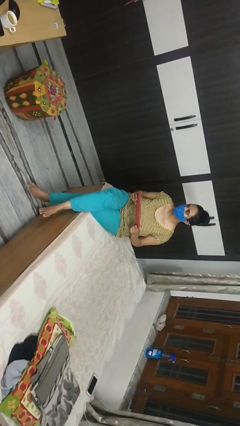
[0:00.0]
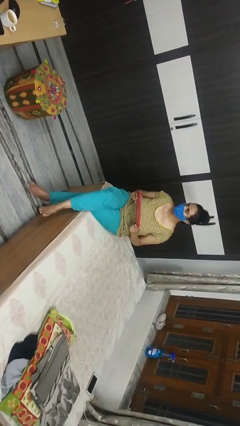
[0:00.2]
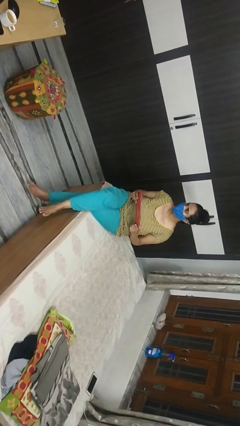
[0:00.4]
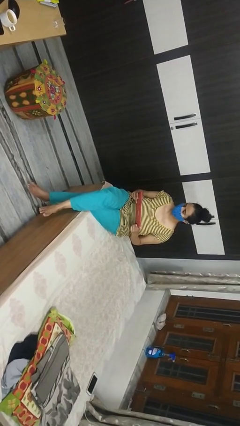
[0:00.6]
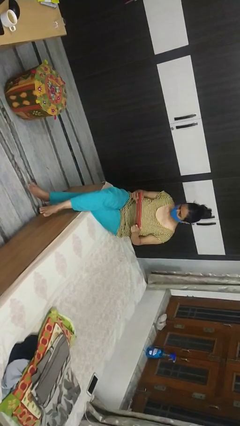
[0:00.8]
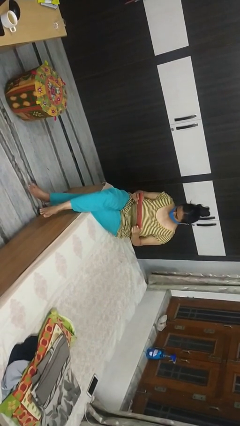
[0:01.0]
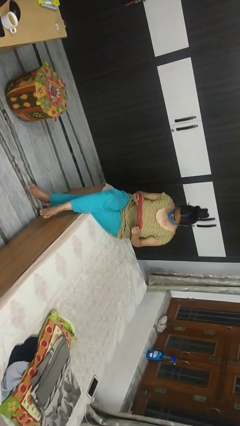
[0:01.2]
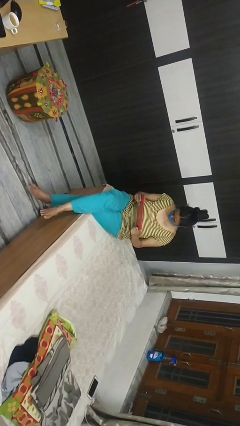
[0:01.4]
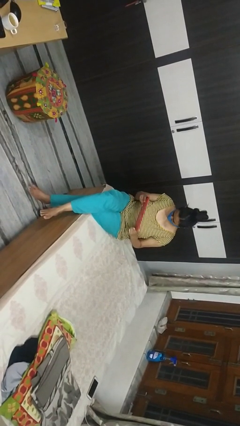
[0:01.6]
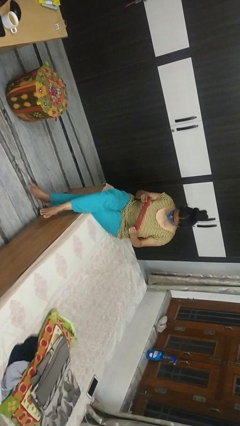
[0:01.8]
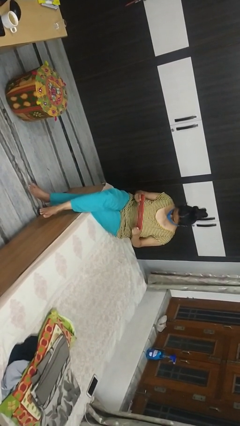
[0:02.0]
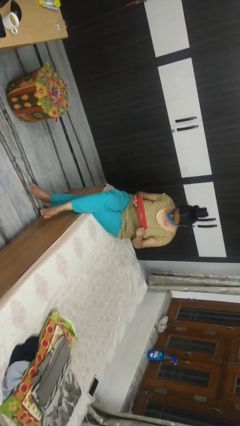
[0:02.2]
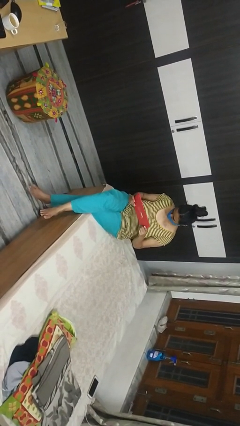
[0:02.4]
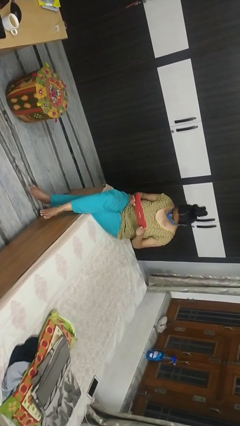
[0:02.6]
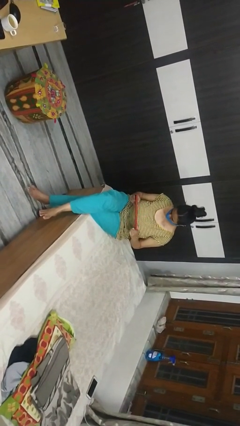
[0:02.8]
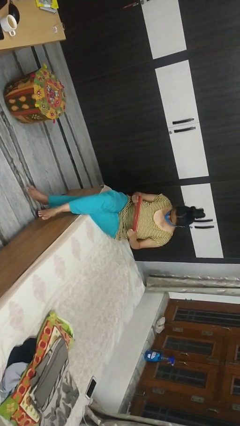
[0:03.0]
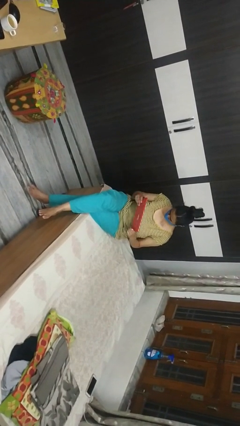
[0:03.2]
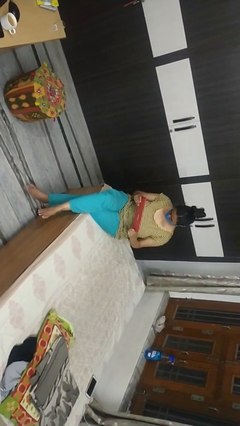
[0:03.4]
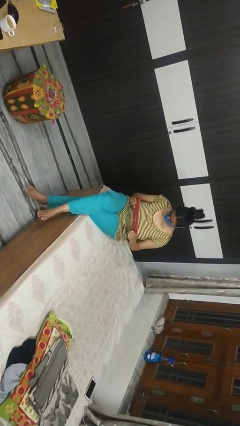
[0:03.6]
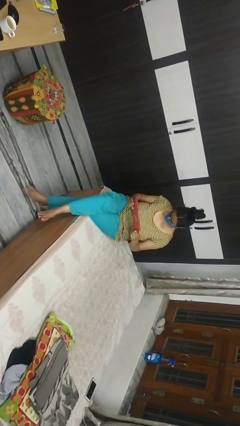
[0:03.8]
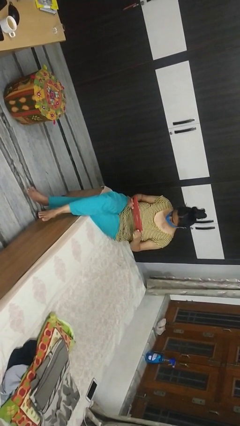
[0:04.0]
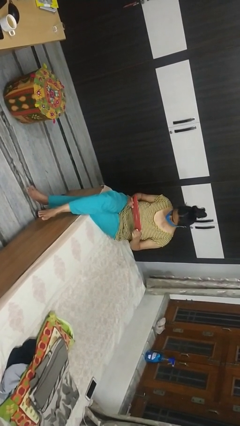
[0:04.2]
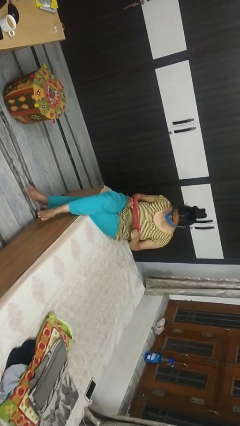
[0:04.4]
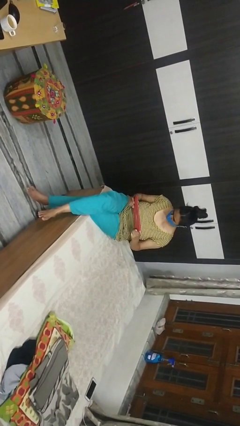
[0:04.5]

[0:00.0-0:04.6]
person interacts with handheld game

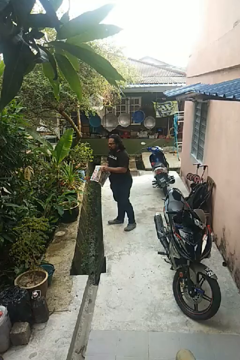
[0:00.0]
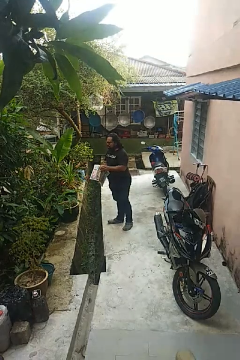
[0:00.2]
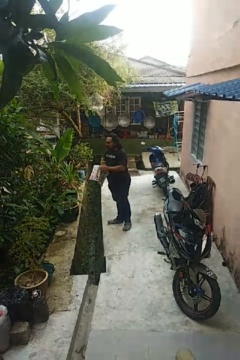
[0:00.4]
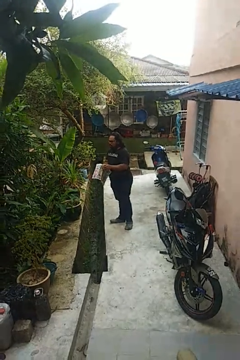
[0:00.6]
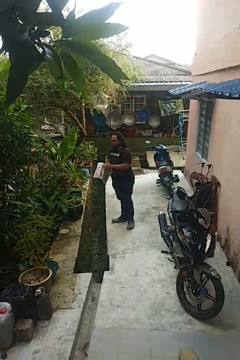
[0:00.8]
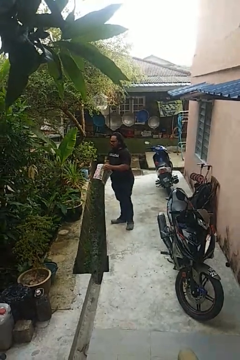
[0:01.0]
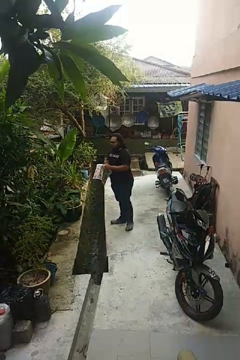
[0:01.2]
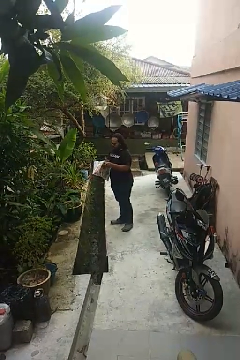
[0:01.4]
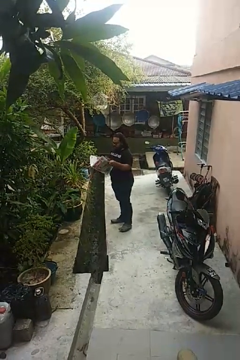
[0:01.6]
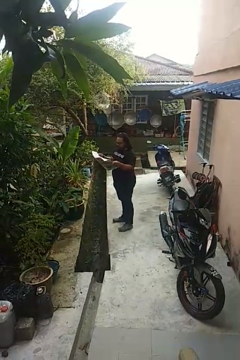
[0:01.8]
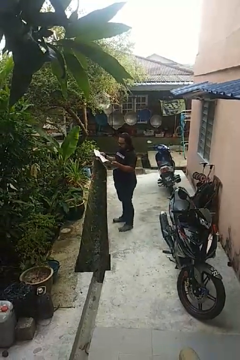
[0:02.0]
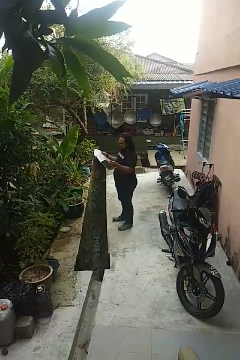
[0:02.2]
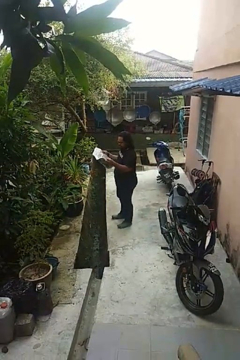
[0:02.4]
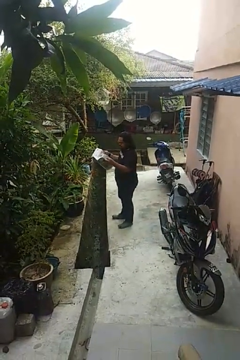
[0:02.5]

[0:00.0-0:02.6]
person reads newspaper

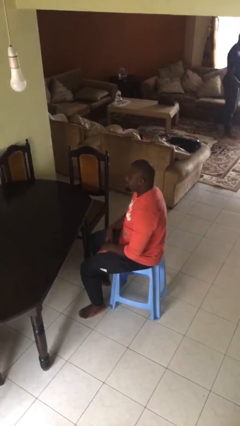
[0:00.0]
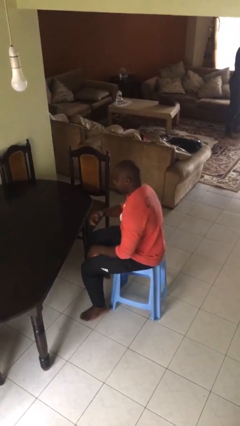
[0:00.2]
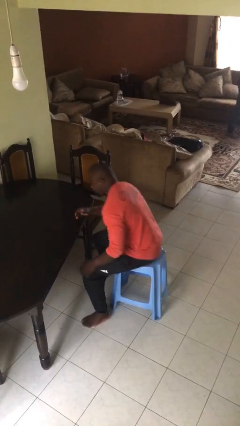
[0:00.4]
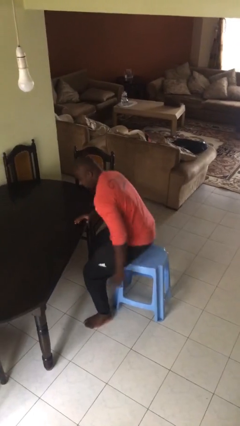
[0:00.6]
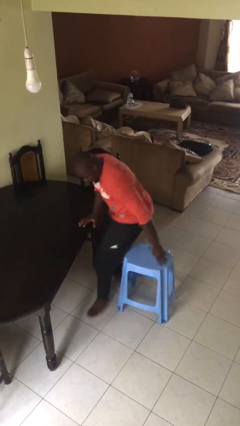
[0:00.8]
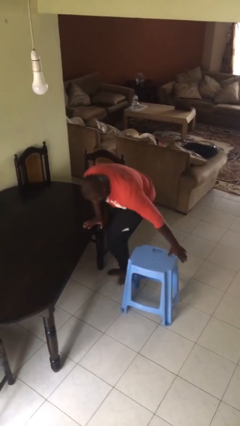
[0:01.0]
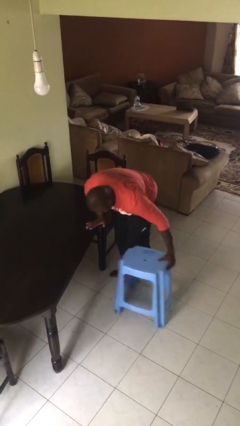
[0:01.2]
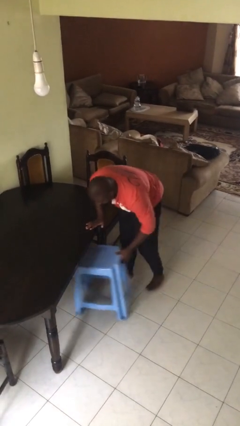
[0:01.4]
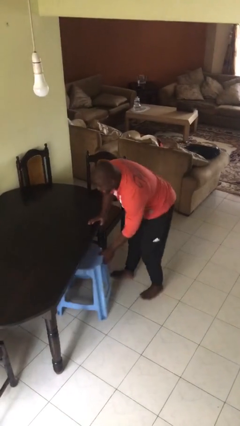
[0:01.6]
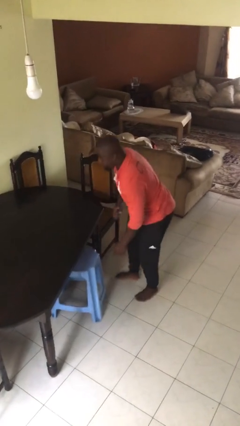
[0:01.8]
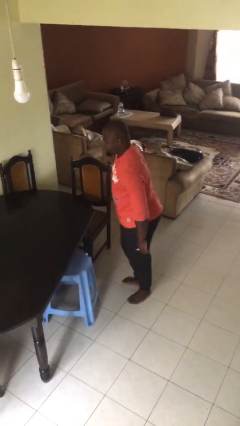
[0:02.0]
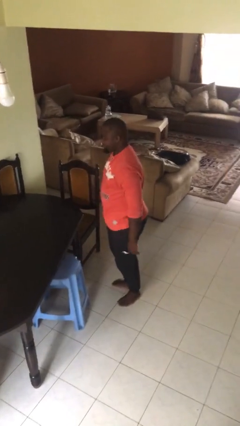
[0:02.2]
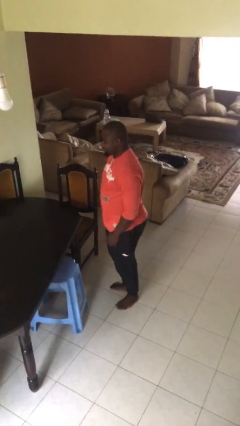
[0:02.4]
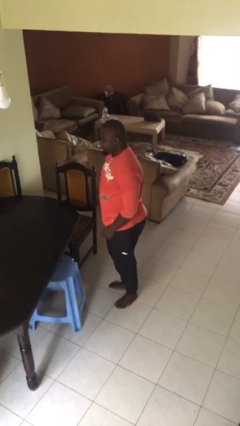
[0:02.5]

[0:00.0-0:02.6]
person stands up

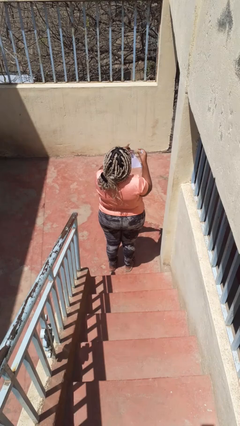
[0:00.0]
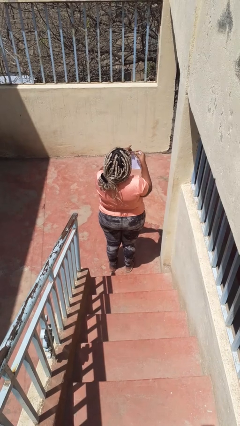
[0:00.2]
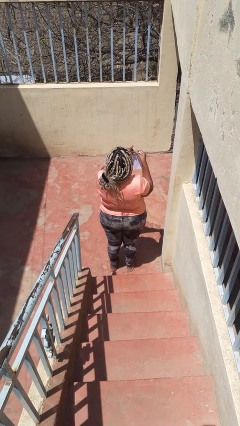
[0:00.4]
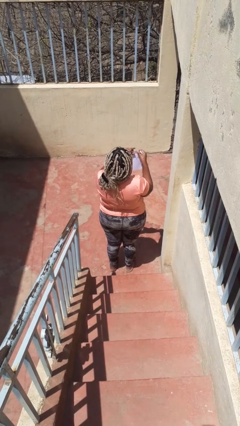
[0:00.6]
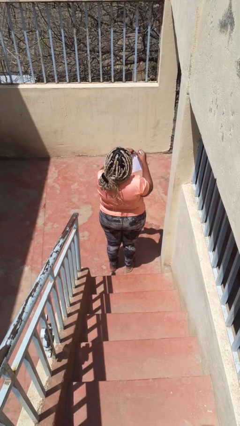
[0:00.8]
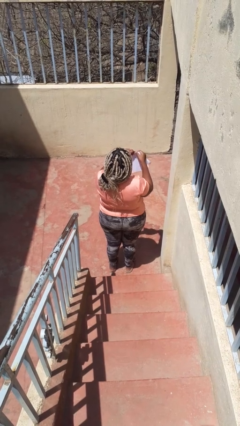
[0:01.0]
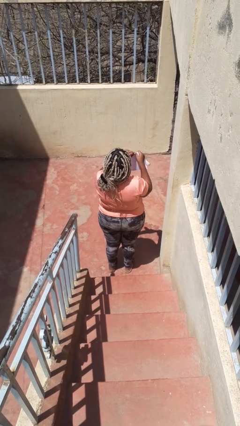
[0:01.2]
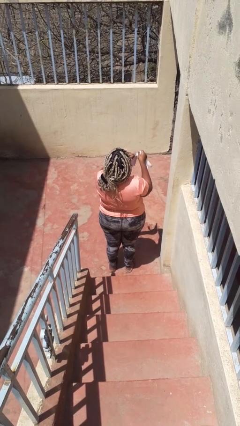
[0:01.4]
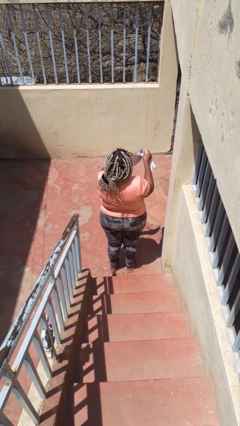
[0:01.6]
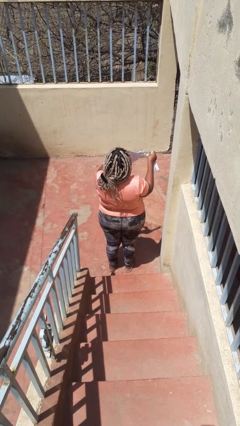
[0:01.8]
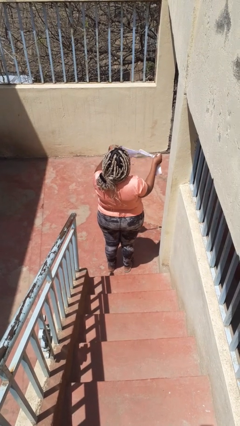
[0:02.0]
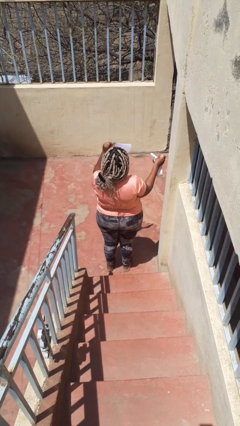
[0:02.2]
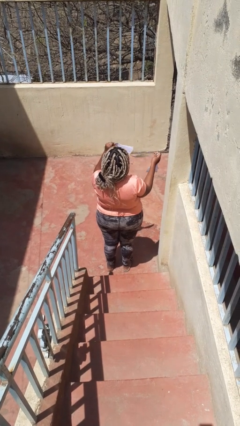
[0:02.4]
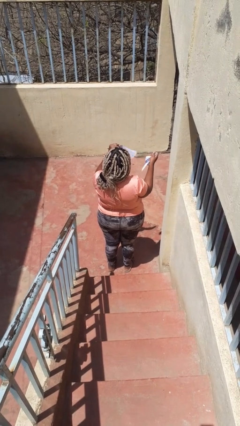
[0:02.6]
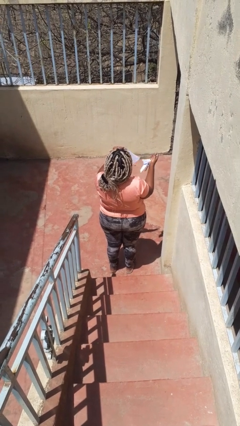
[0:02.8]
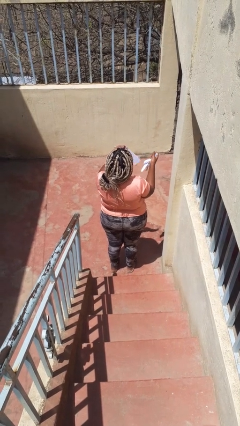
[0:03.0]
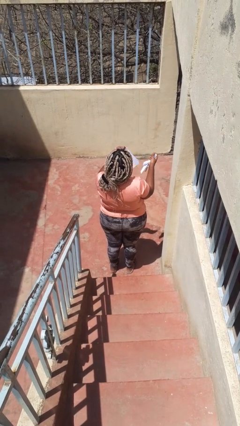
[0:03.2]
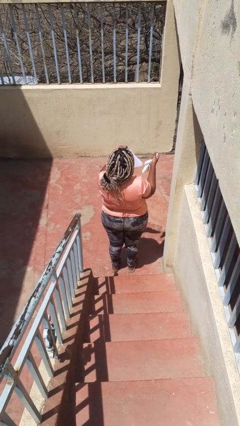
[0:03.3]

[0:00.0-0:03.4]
person tears paper

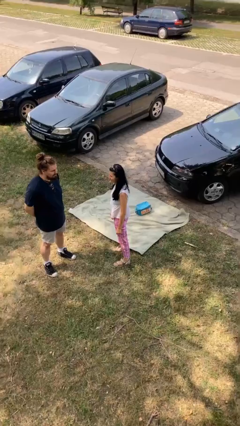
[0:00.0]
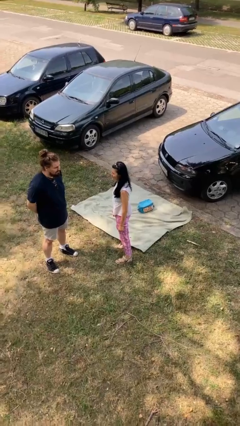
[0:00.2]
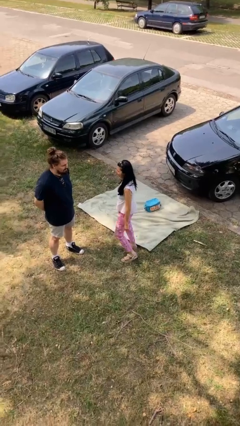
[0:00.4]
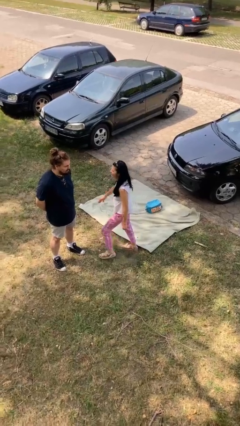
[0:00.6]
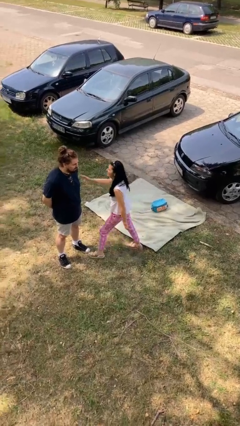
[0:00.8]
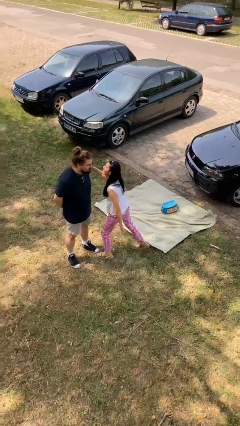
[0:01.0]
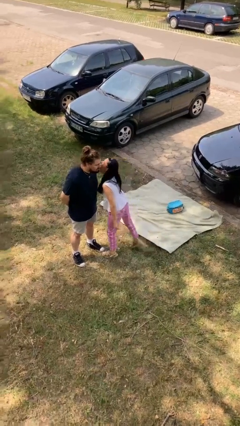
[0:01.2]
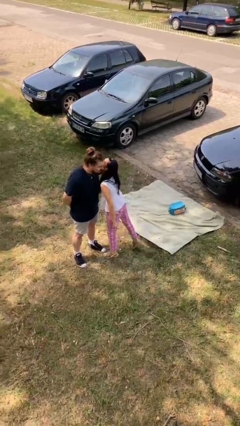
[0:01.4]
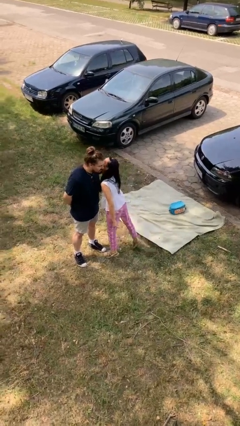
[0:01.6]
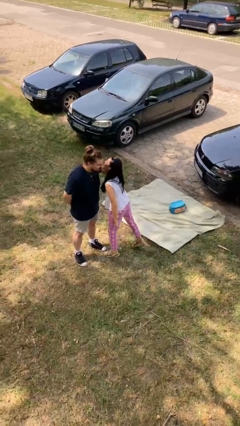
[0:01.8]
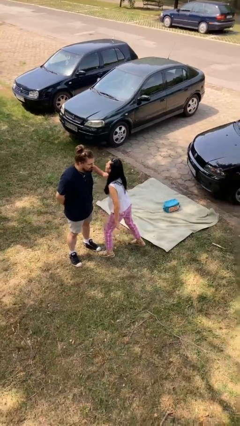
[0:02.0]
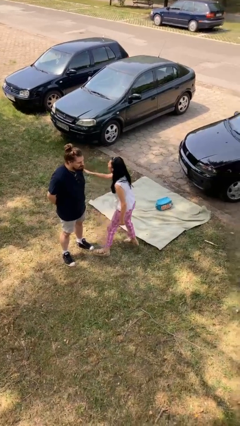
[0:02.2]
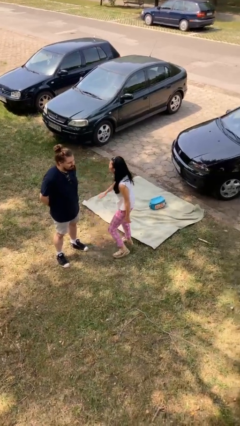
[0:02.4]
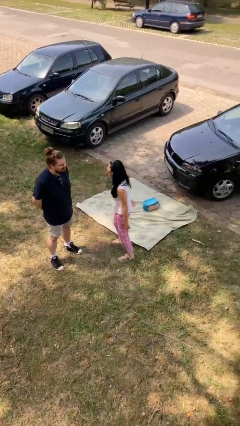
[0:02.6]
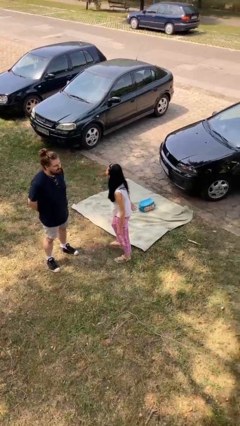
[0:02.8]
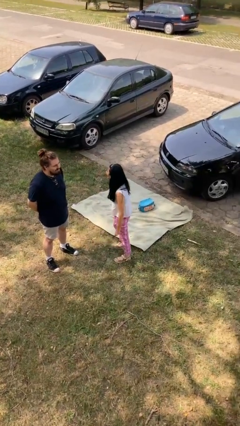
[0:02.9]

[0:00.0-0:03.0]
person kisses cheek of person

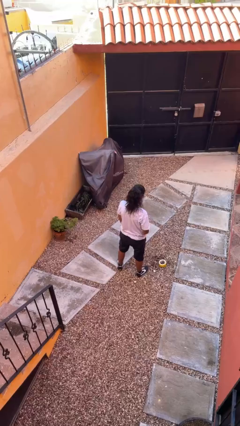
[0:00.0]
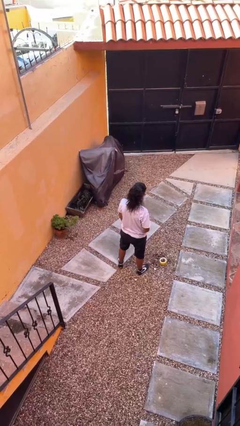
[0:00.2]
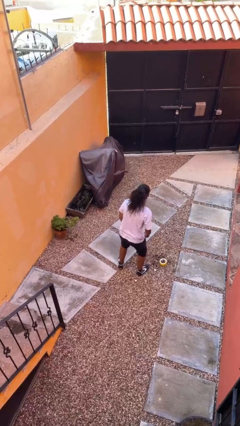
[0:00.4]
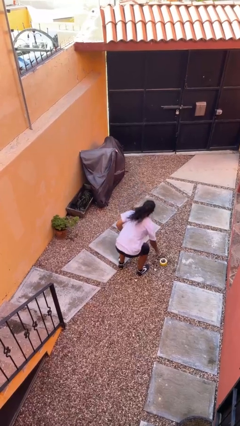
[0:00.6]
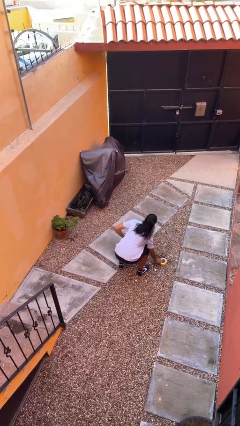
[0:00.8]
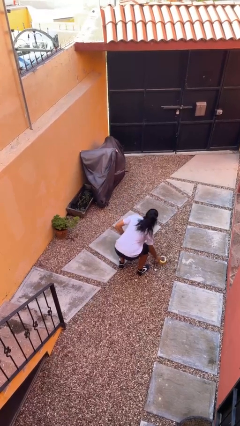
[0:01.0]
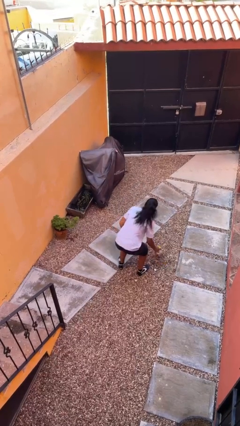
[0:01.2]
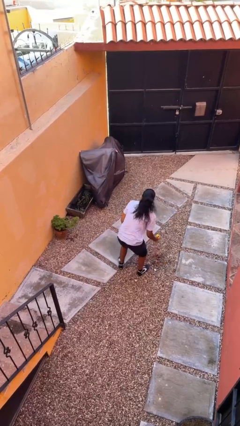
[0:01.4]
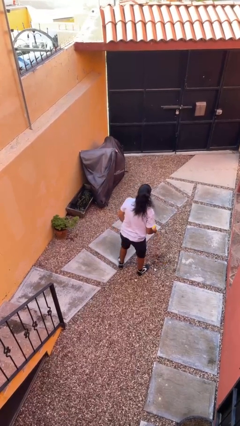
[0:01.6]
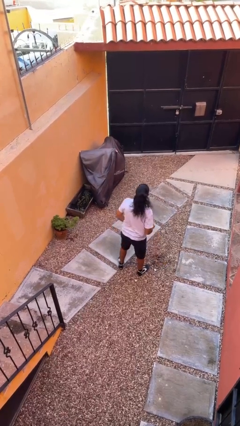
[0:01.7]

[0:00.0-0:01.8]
person picks up object from floor
